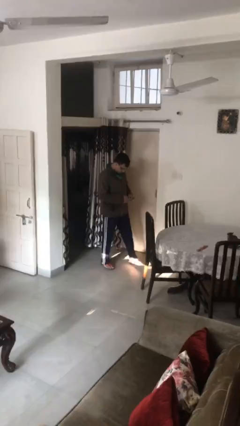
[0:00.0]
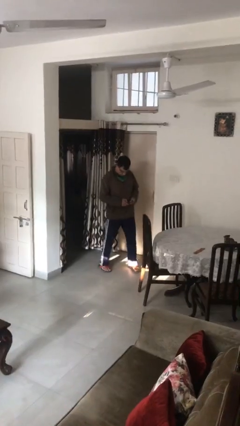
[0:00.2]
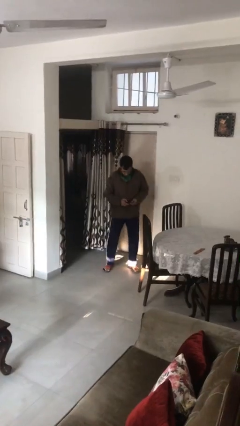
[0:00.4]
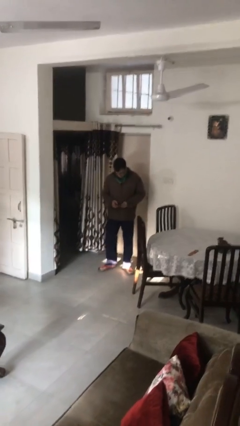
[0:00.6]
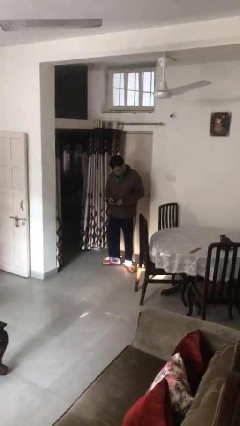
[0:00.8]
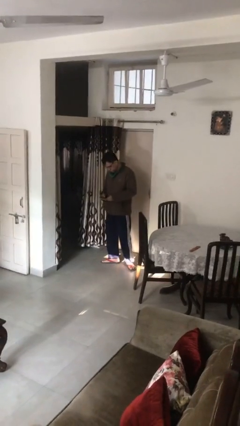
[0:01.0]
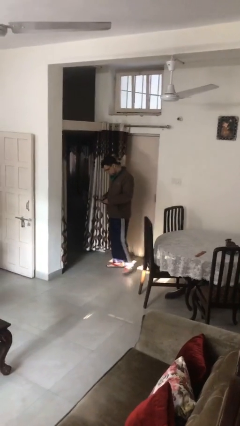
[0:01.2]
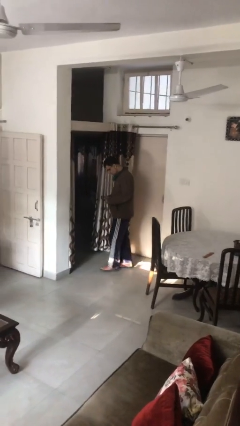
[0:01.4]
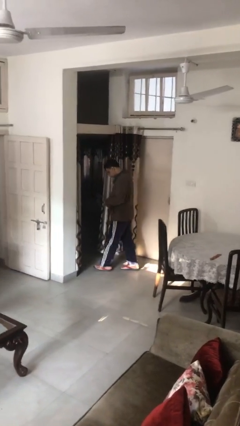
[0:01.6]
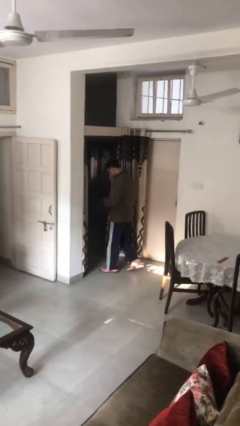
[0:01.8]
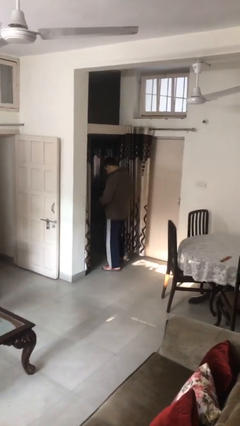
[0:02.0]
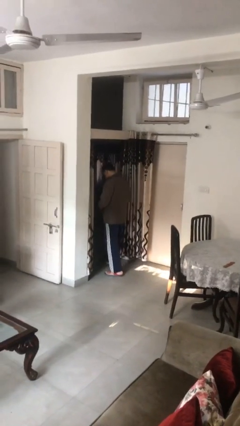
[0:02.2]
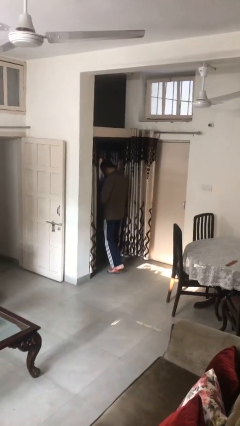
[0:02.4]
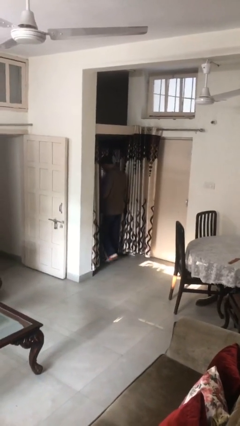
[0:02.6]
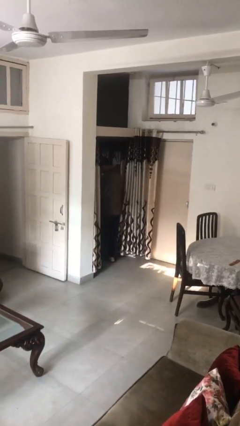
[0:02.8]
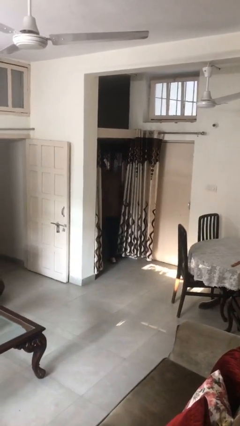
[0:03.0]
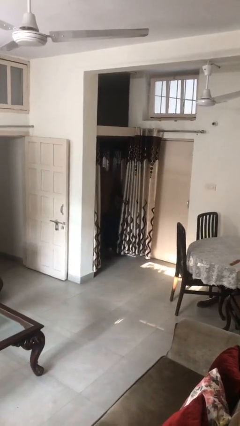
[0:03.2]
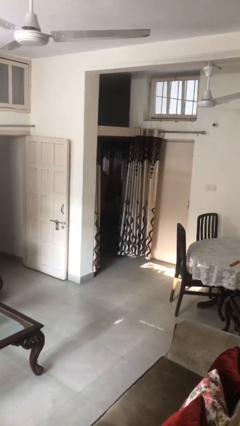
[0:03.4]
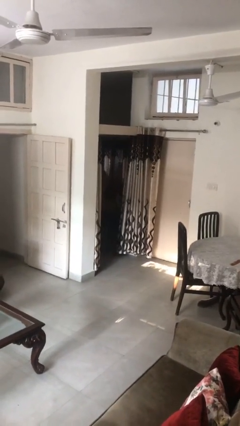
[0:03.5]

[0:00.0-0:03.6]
person exits scene through structure

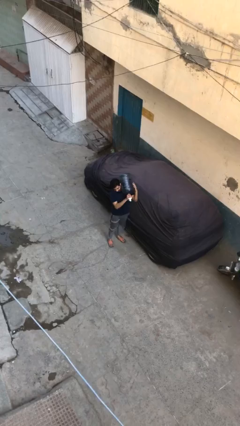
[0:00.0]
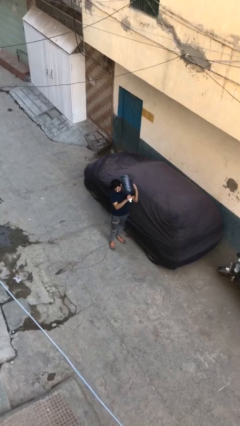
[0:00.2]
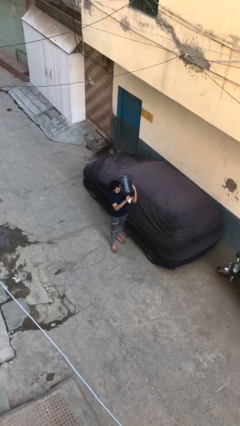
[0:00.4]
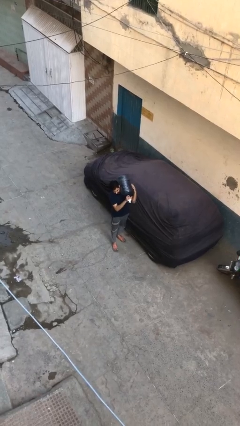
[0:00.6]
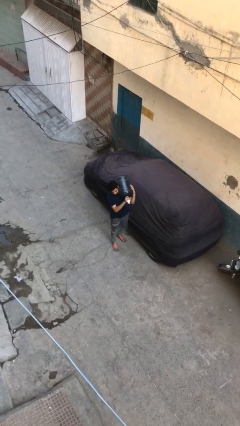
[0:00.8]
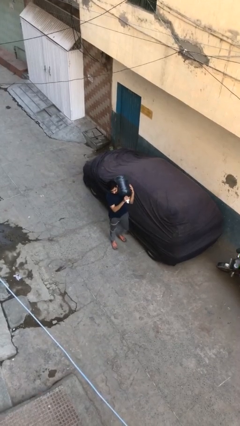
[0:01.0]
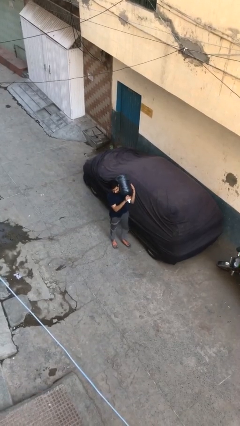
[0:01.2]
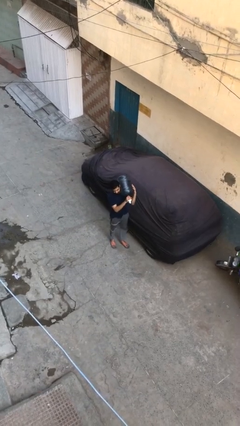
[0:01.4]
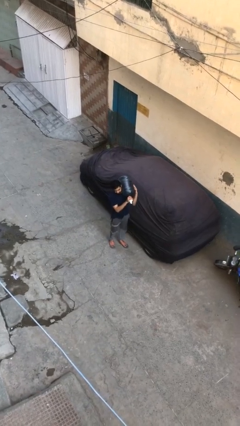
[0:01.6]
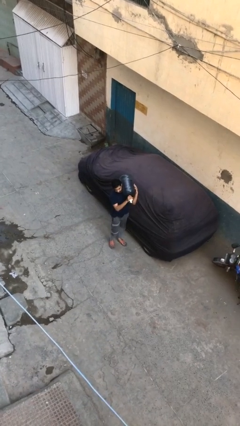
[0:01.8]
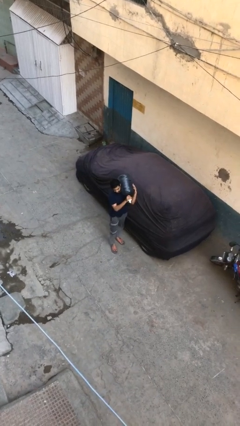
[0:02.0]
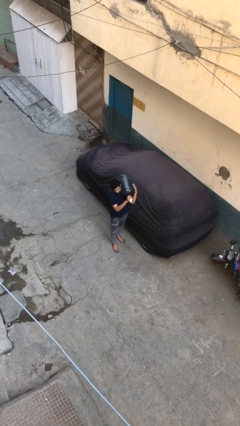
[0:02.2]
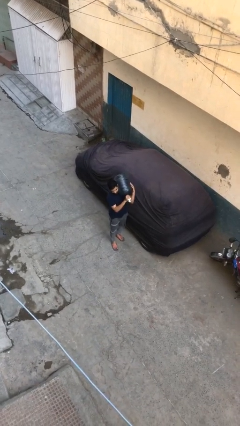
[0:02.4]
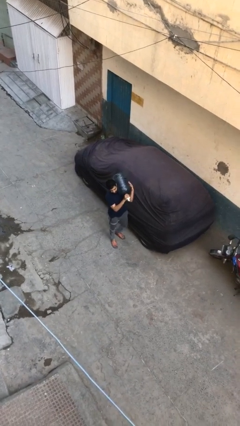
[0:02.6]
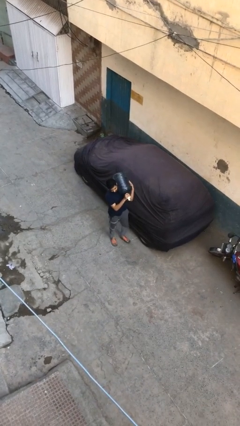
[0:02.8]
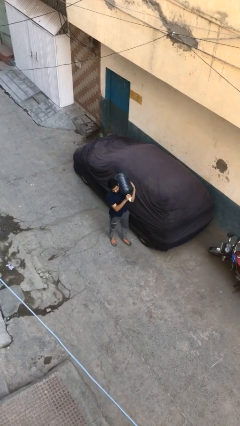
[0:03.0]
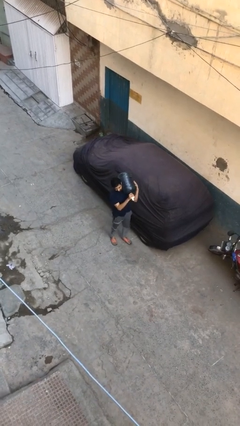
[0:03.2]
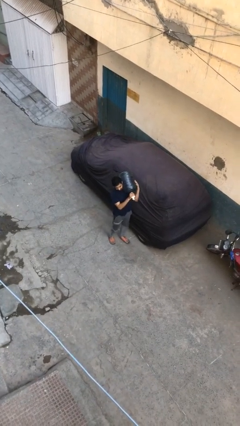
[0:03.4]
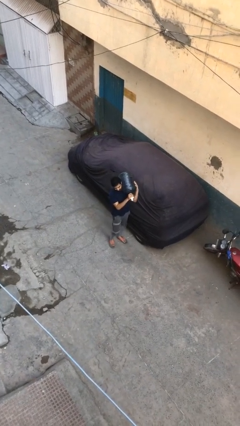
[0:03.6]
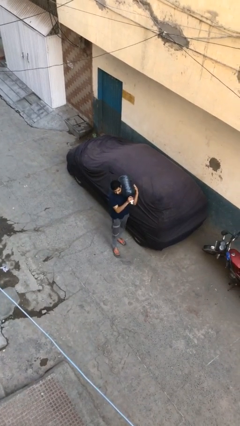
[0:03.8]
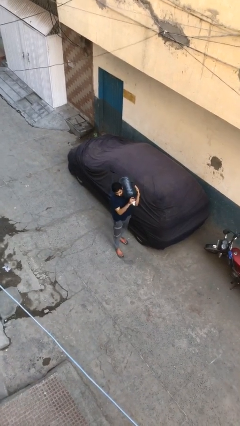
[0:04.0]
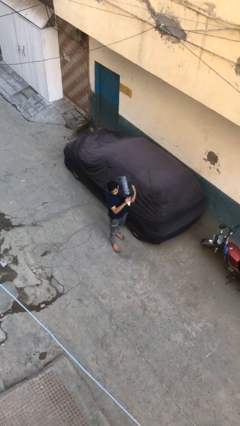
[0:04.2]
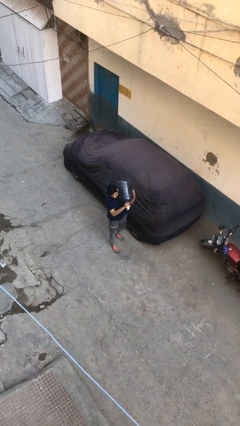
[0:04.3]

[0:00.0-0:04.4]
person carries heavy object

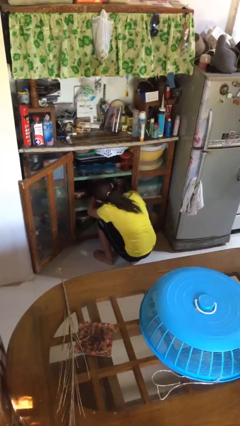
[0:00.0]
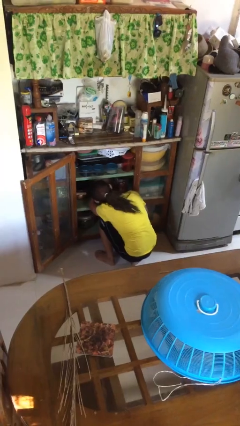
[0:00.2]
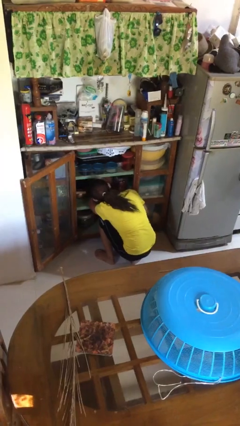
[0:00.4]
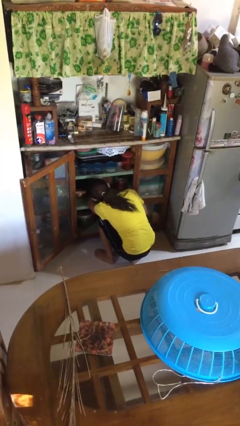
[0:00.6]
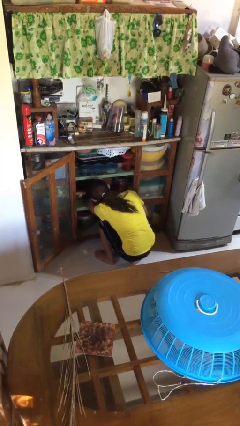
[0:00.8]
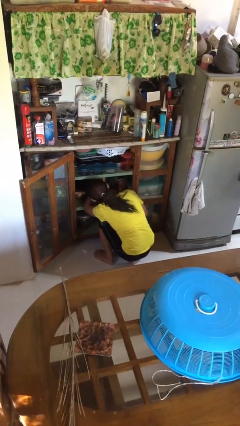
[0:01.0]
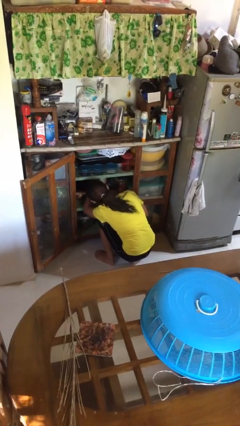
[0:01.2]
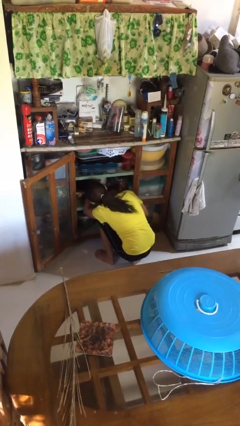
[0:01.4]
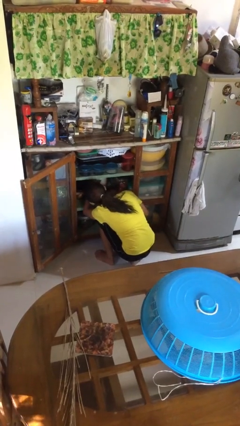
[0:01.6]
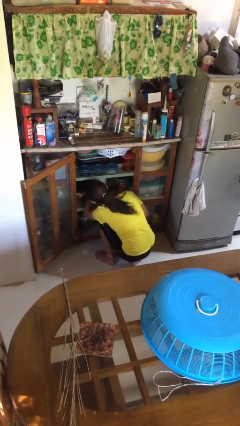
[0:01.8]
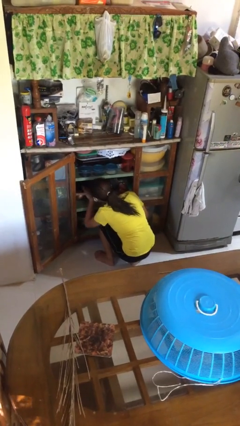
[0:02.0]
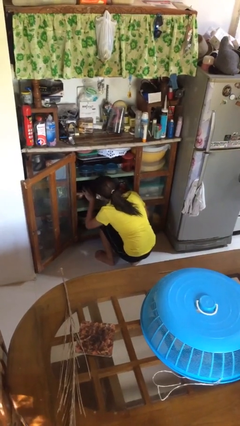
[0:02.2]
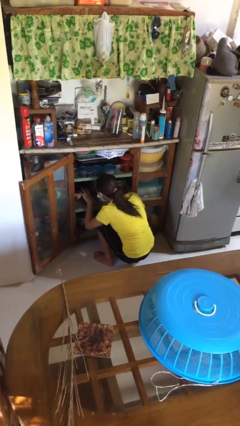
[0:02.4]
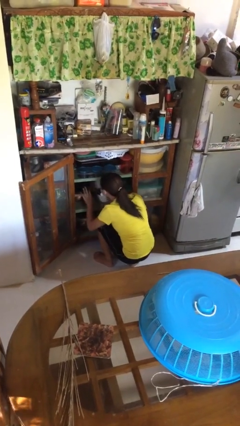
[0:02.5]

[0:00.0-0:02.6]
person searches in cabinet

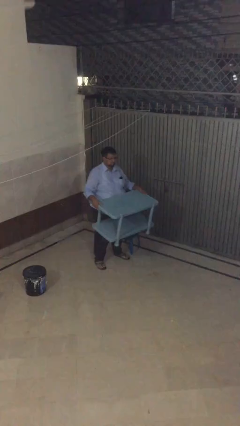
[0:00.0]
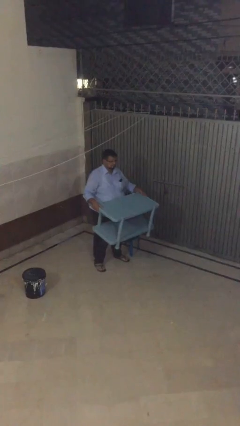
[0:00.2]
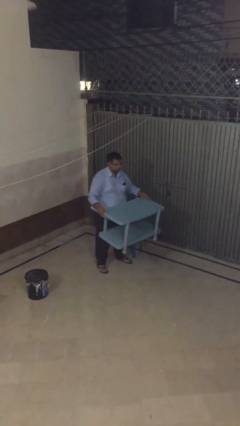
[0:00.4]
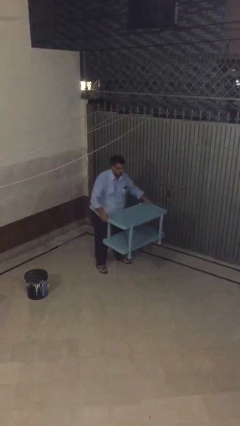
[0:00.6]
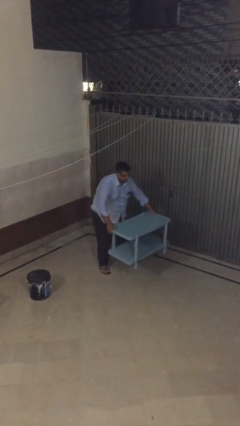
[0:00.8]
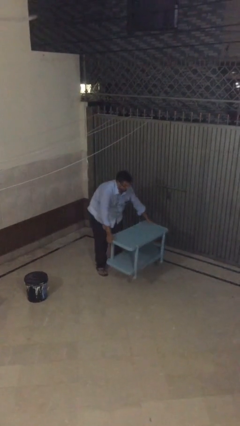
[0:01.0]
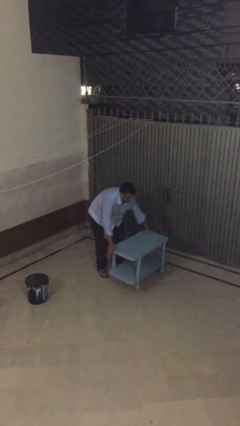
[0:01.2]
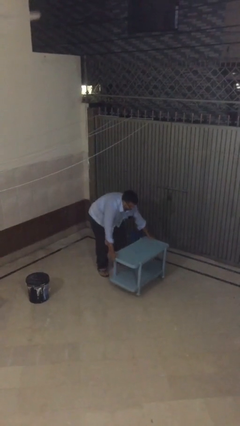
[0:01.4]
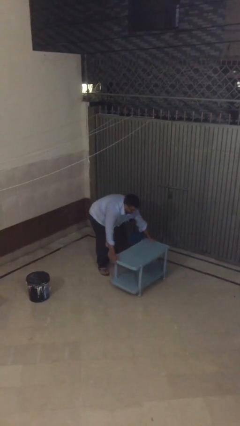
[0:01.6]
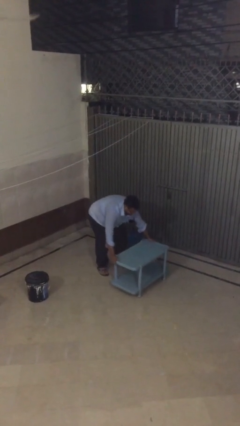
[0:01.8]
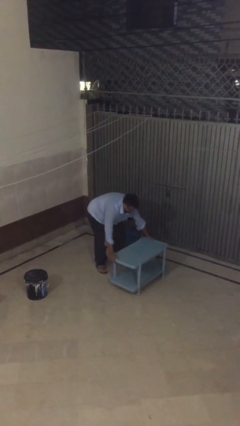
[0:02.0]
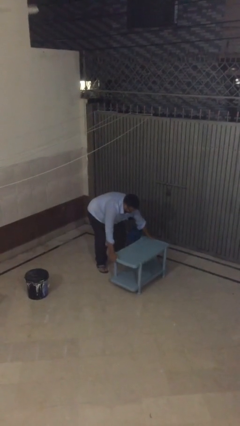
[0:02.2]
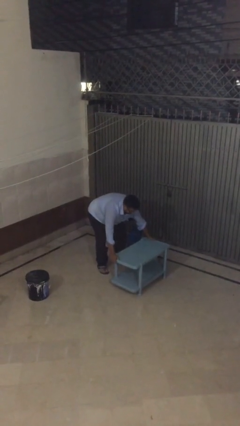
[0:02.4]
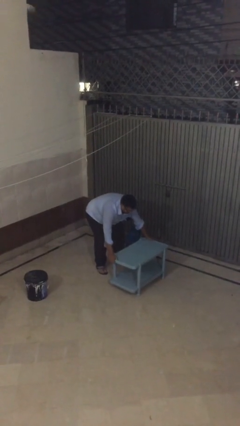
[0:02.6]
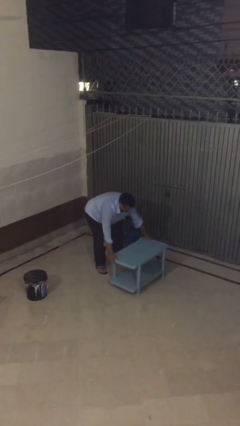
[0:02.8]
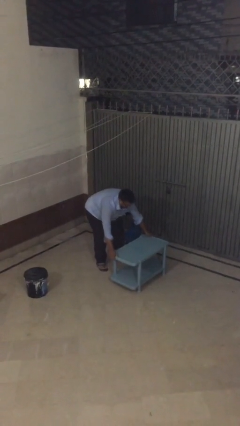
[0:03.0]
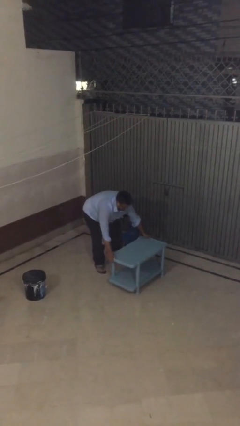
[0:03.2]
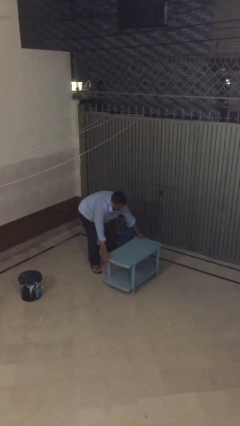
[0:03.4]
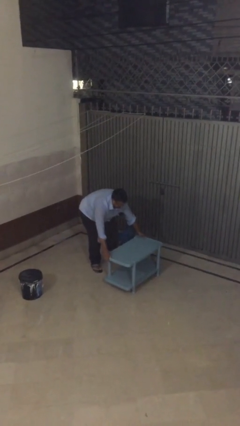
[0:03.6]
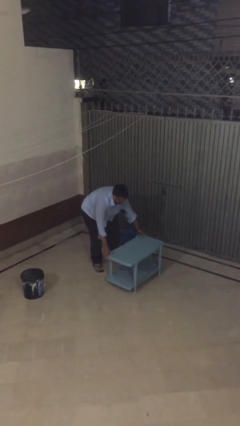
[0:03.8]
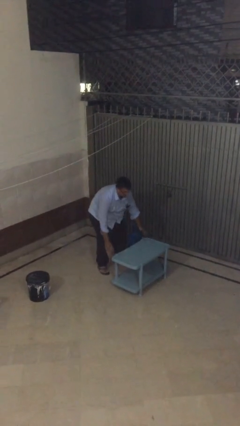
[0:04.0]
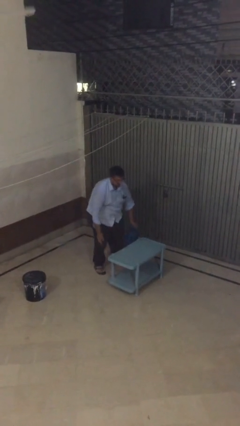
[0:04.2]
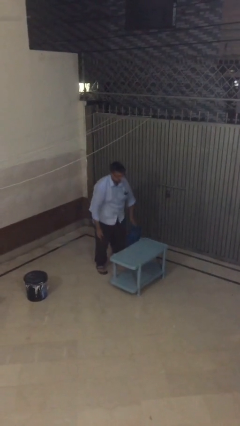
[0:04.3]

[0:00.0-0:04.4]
person puts down object on floor

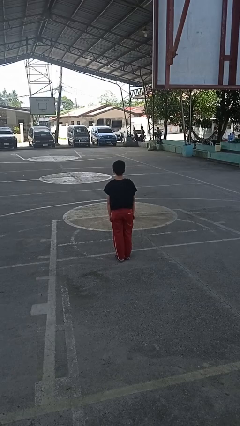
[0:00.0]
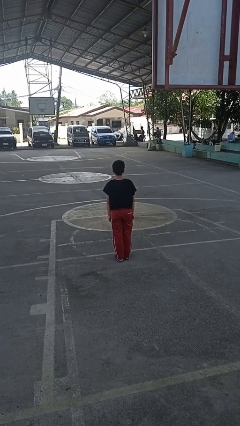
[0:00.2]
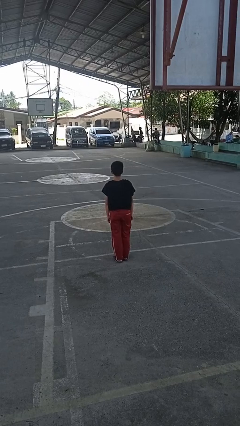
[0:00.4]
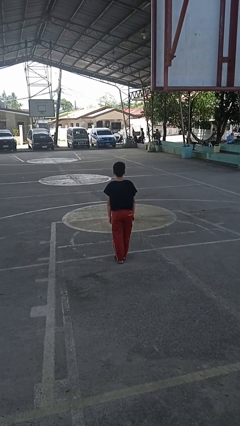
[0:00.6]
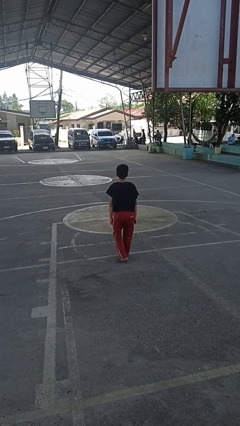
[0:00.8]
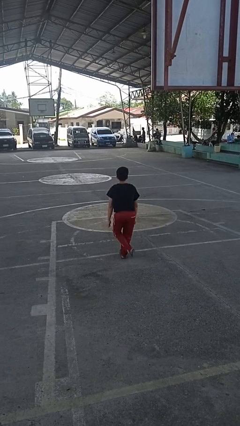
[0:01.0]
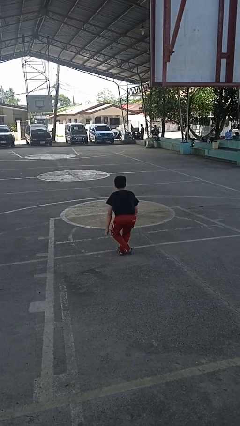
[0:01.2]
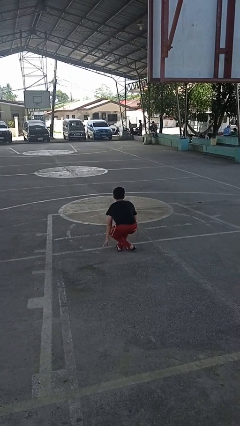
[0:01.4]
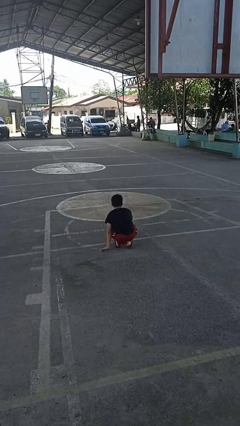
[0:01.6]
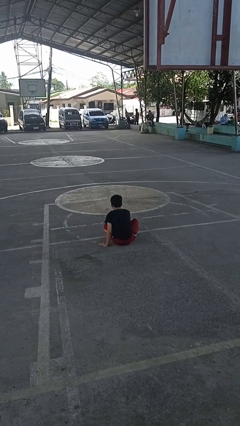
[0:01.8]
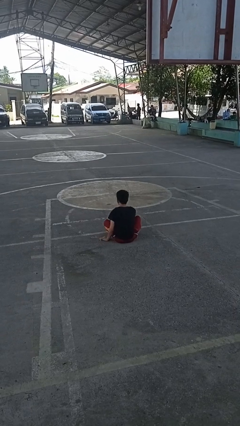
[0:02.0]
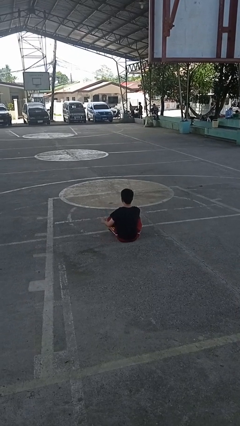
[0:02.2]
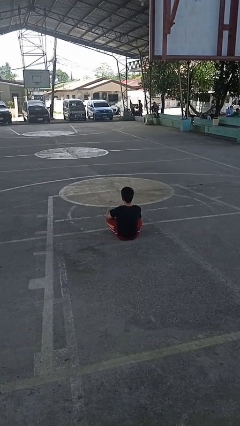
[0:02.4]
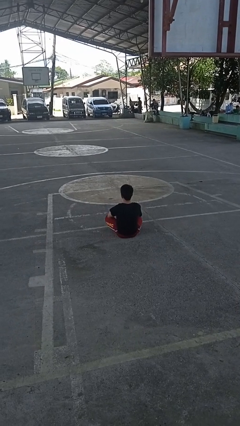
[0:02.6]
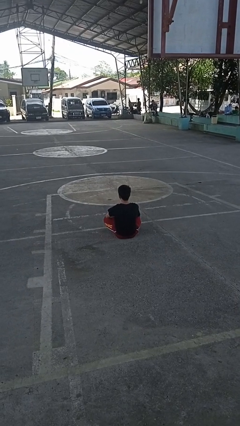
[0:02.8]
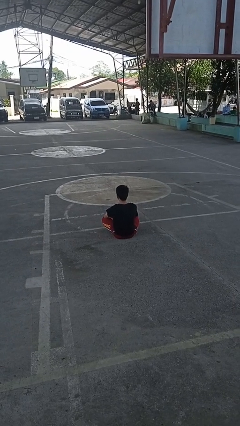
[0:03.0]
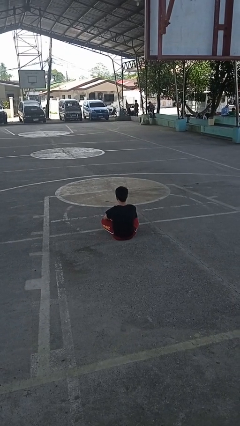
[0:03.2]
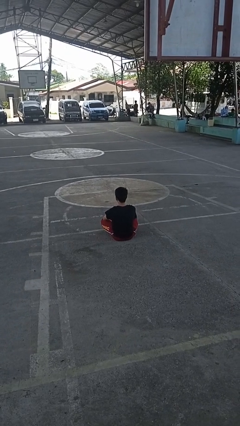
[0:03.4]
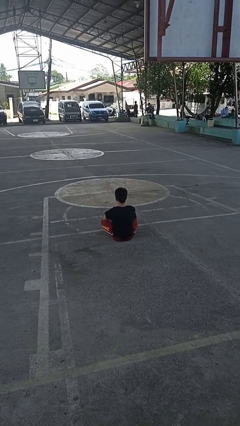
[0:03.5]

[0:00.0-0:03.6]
person sits crisscross
